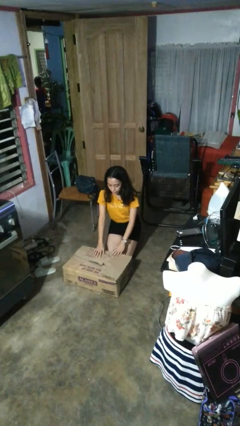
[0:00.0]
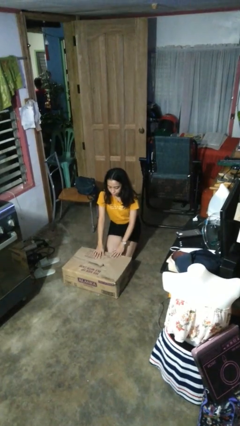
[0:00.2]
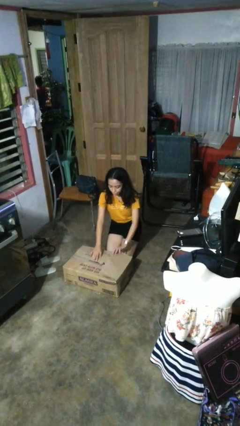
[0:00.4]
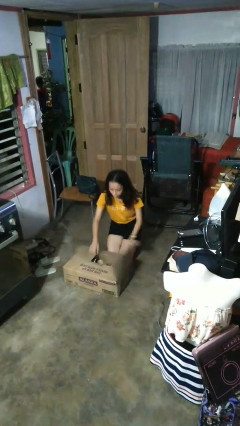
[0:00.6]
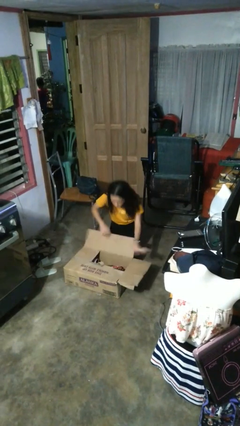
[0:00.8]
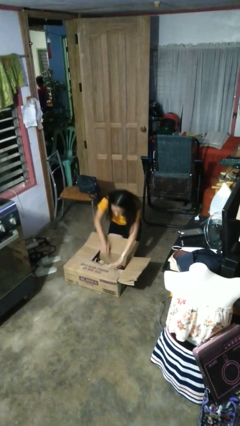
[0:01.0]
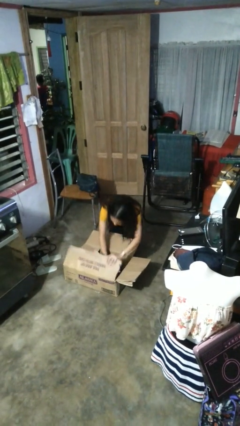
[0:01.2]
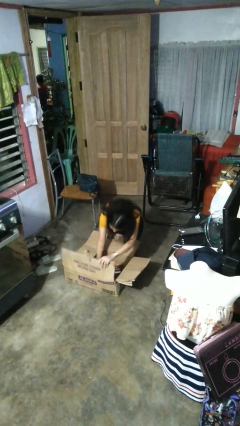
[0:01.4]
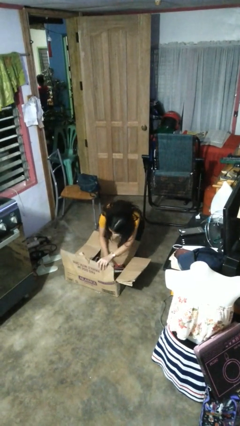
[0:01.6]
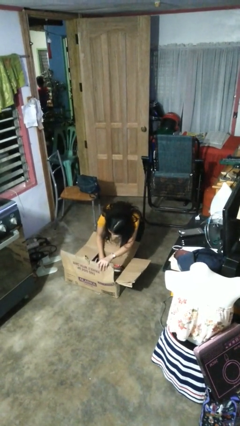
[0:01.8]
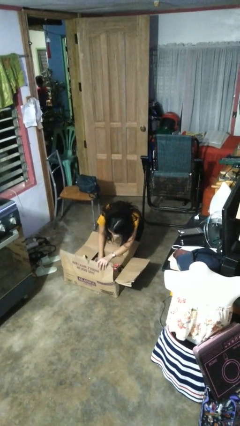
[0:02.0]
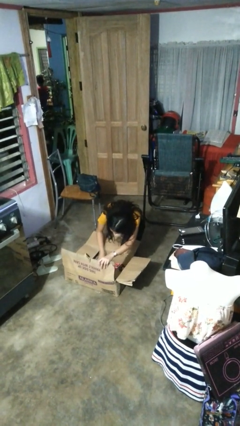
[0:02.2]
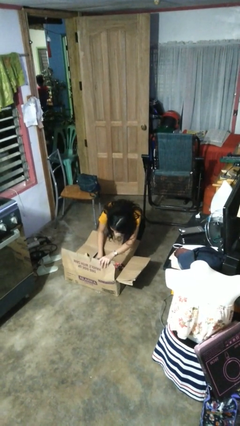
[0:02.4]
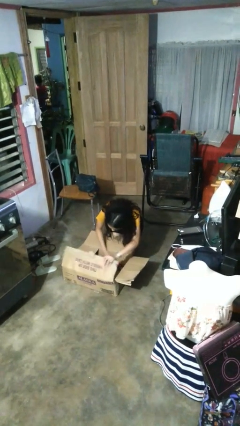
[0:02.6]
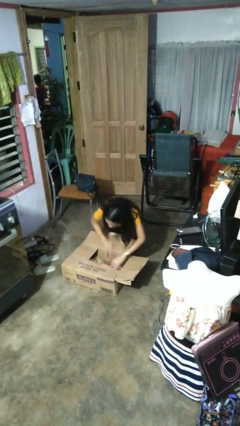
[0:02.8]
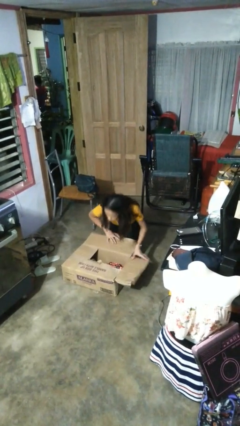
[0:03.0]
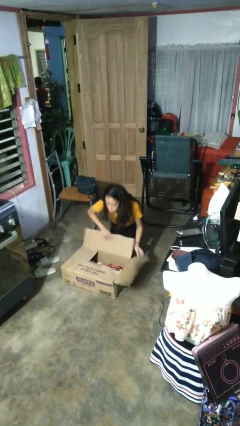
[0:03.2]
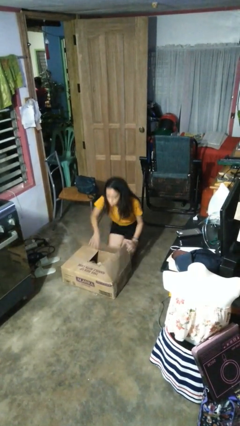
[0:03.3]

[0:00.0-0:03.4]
person searches in box

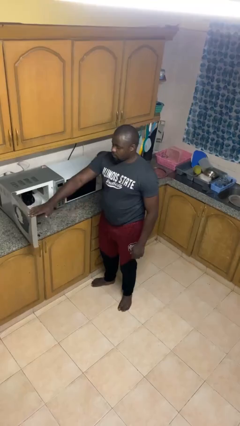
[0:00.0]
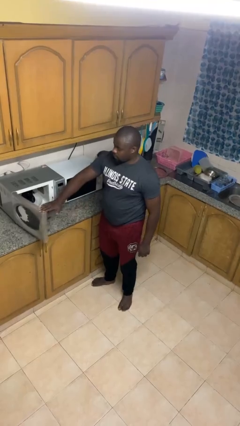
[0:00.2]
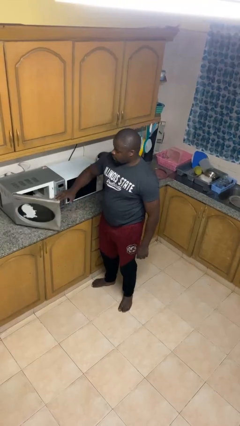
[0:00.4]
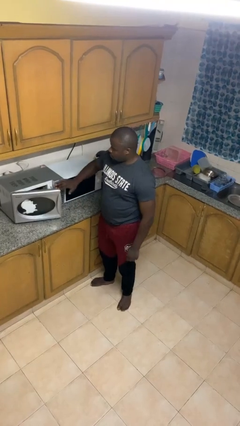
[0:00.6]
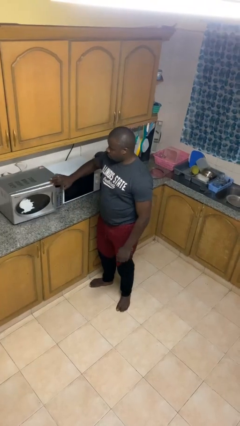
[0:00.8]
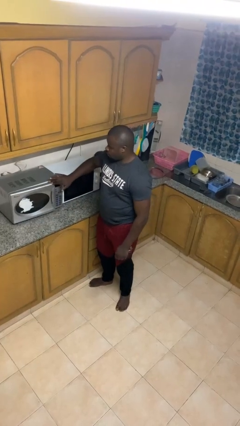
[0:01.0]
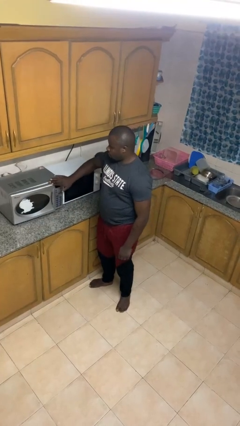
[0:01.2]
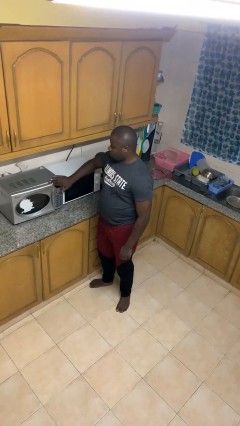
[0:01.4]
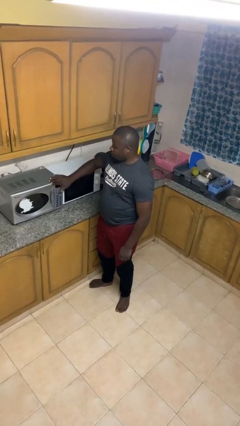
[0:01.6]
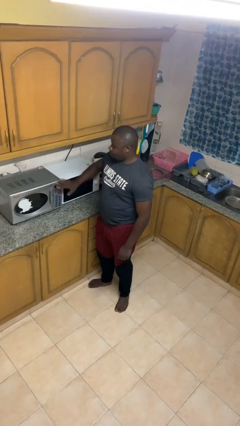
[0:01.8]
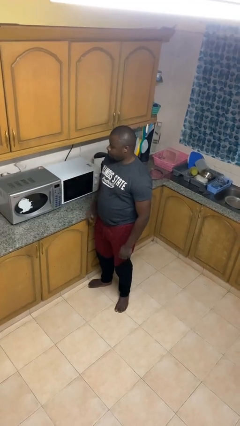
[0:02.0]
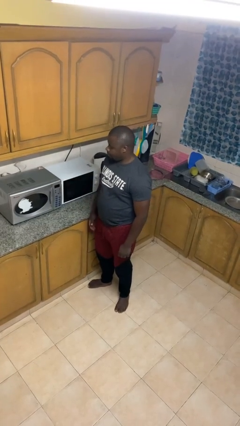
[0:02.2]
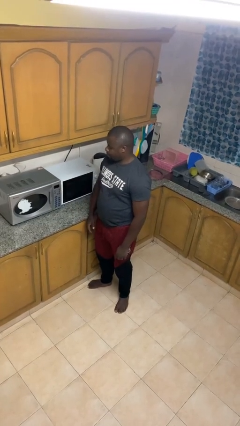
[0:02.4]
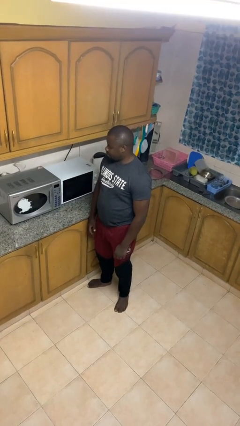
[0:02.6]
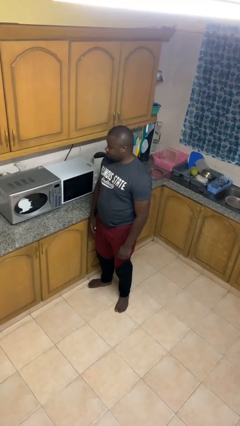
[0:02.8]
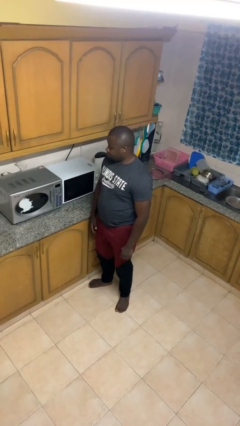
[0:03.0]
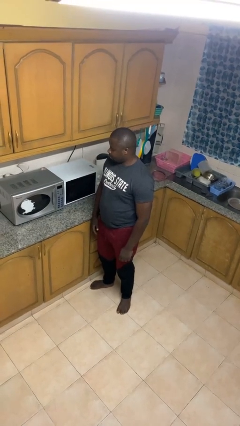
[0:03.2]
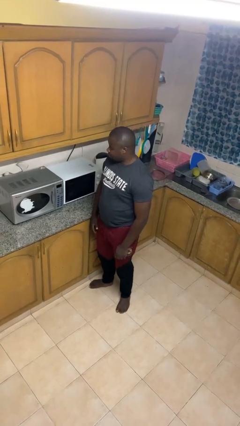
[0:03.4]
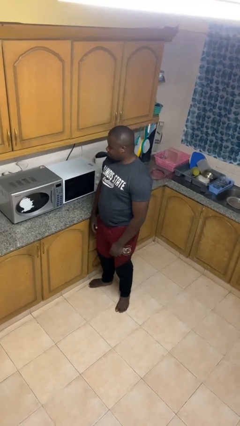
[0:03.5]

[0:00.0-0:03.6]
person closes microwave

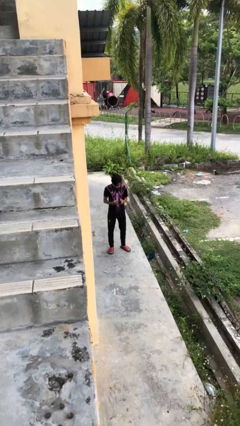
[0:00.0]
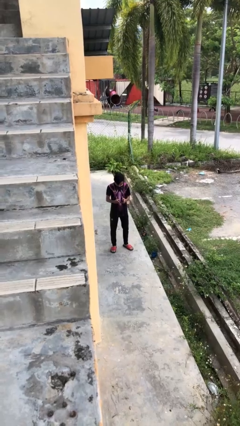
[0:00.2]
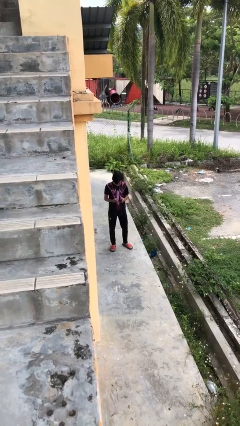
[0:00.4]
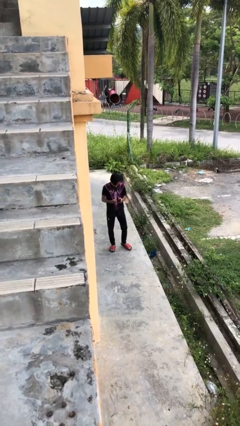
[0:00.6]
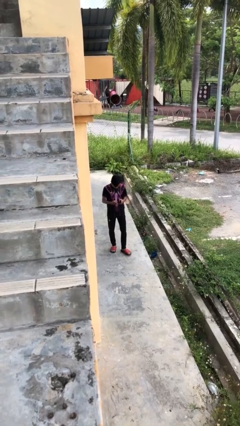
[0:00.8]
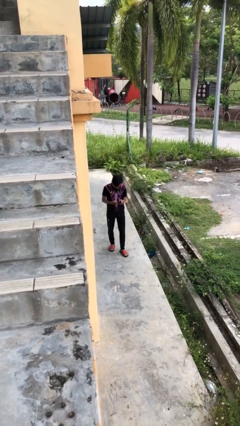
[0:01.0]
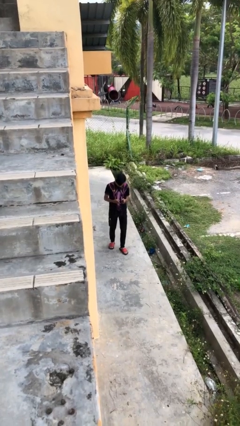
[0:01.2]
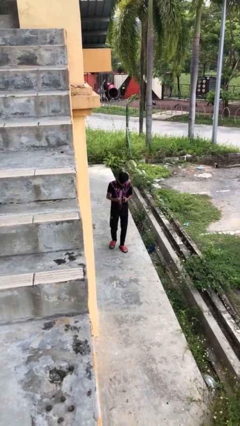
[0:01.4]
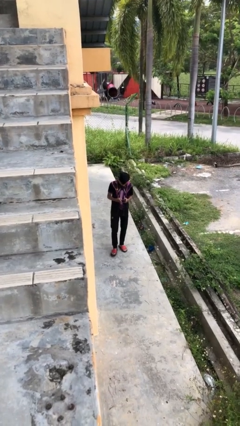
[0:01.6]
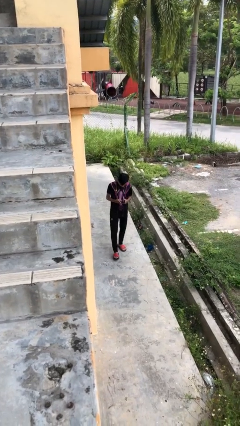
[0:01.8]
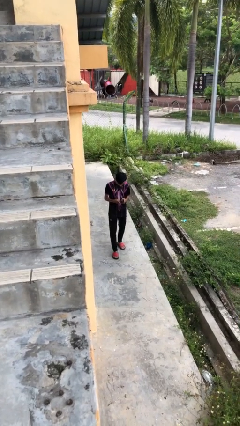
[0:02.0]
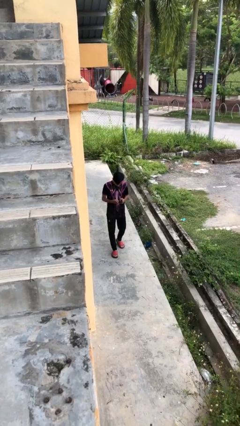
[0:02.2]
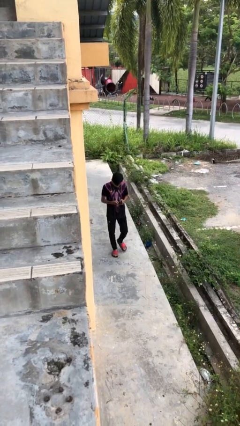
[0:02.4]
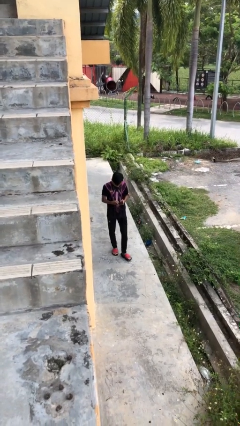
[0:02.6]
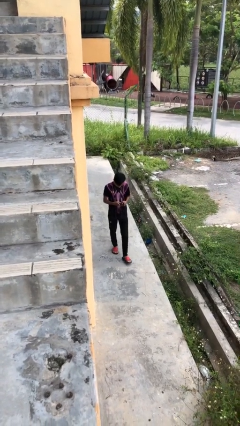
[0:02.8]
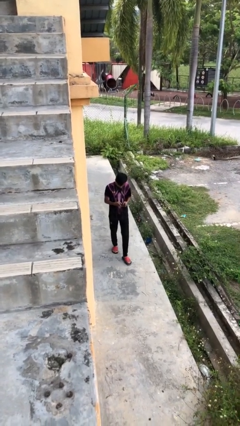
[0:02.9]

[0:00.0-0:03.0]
person texts on phone

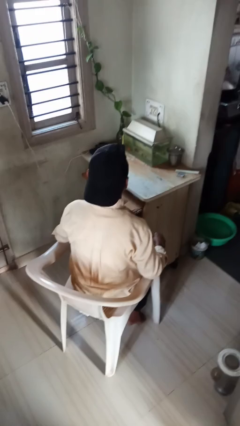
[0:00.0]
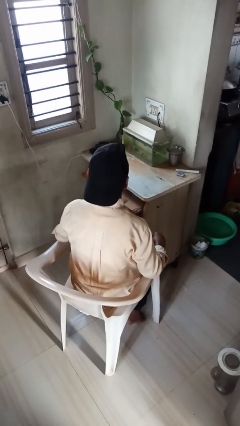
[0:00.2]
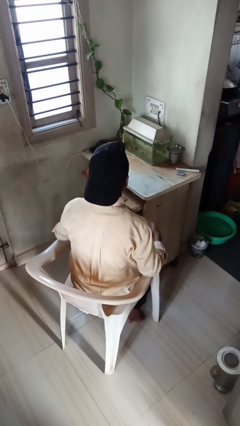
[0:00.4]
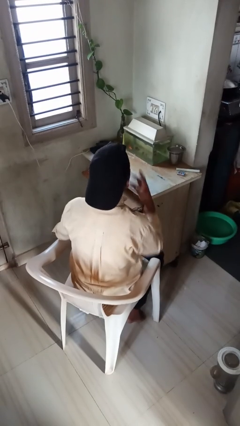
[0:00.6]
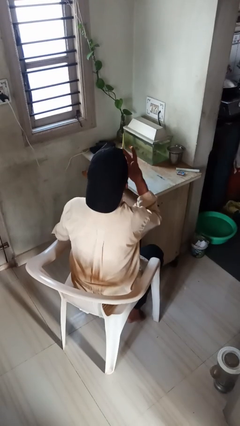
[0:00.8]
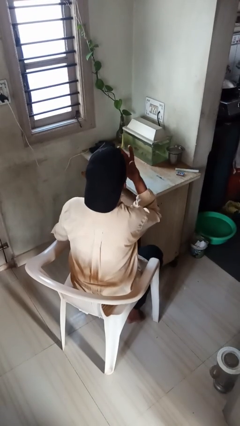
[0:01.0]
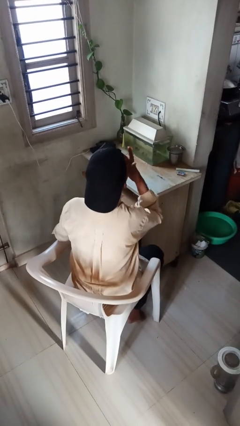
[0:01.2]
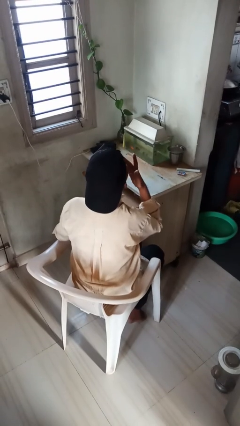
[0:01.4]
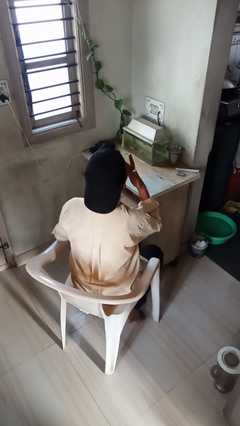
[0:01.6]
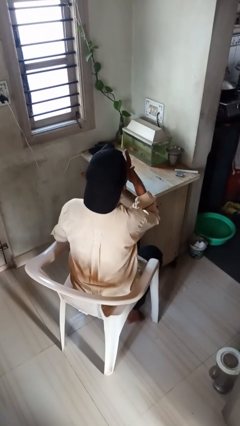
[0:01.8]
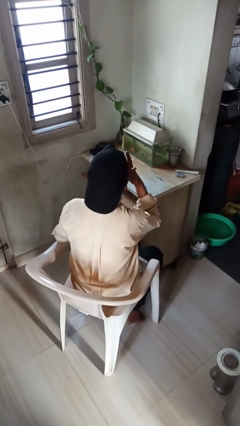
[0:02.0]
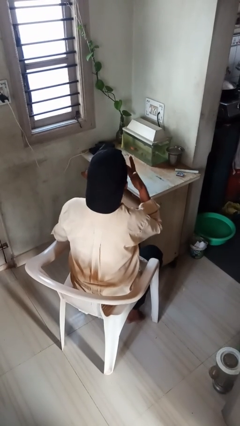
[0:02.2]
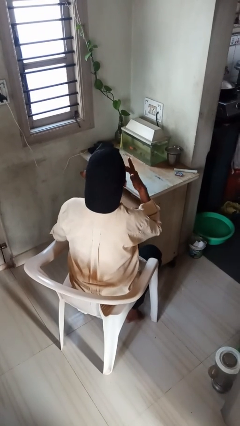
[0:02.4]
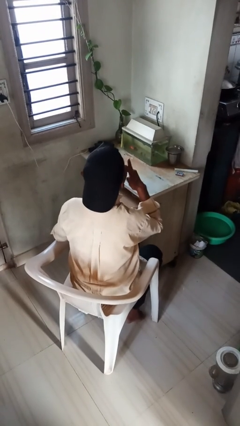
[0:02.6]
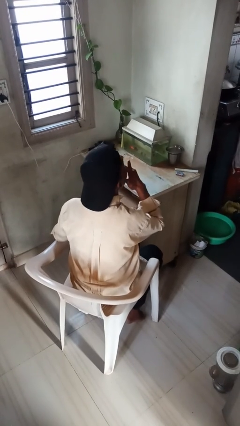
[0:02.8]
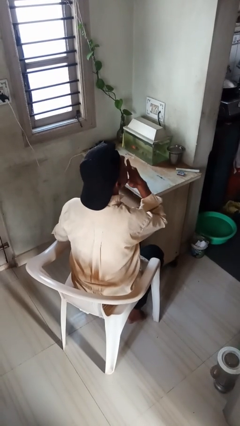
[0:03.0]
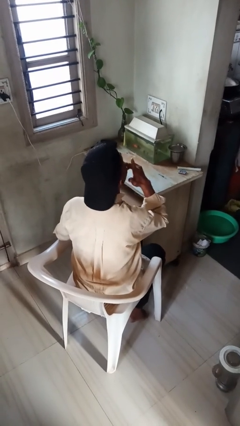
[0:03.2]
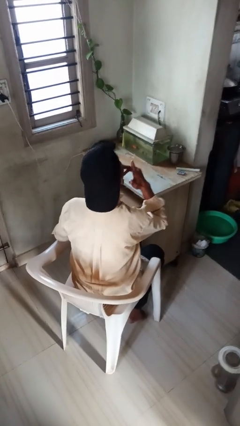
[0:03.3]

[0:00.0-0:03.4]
person licks fingers

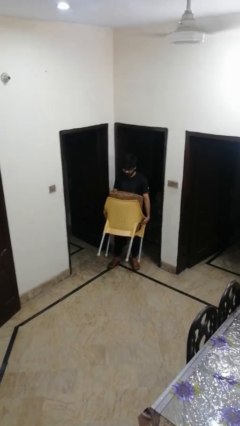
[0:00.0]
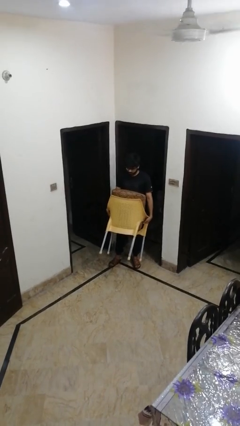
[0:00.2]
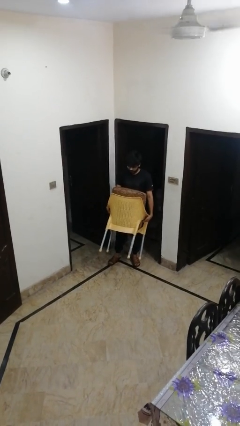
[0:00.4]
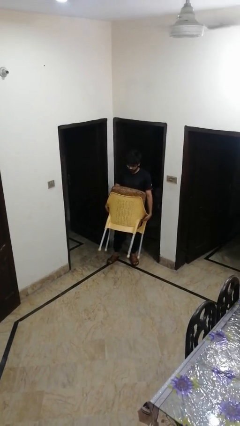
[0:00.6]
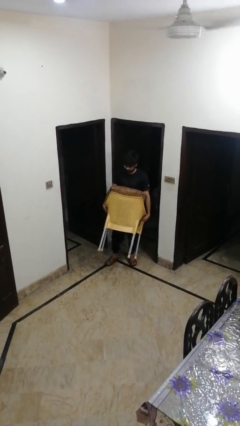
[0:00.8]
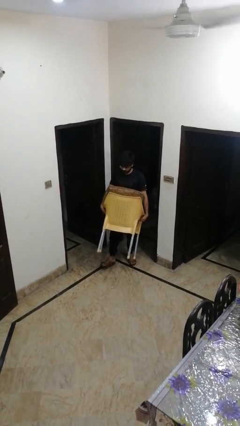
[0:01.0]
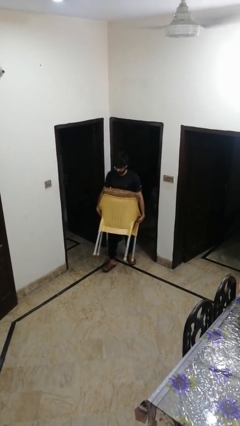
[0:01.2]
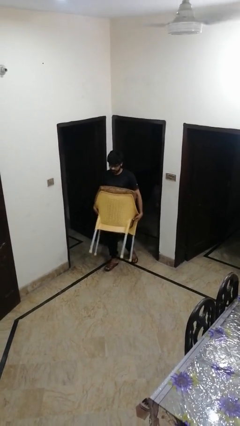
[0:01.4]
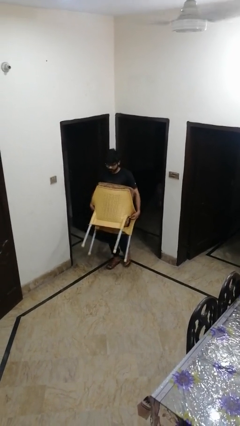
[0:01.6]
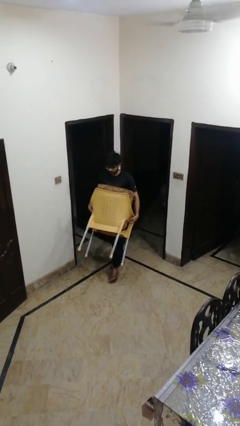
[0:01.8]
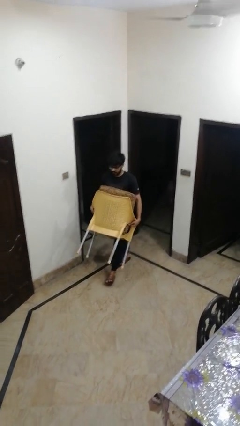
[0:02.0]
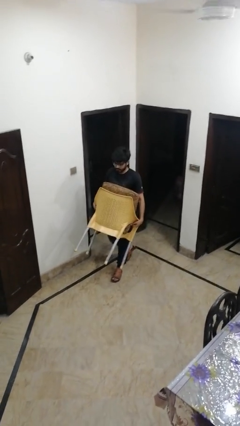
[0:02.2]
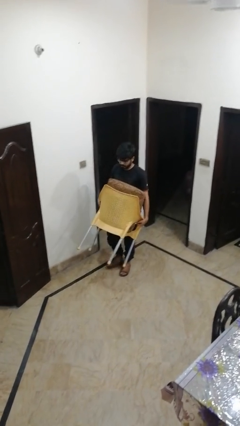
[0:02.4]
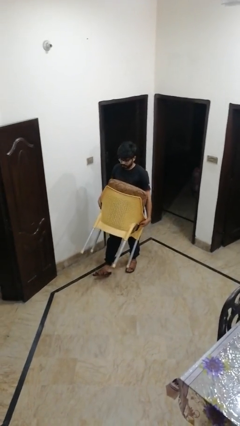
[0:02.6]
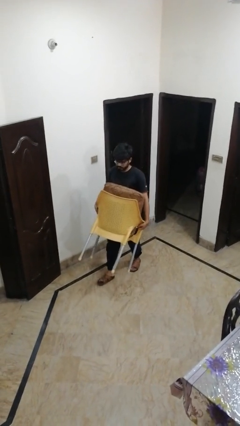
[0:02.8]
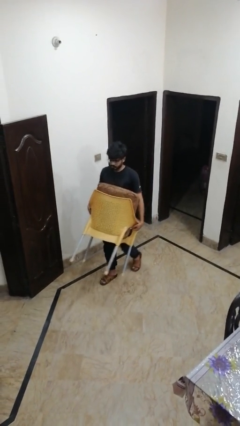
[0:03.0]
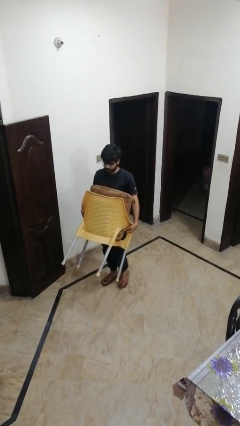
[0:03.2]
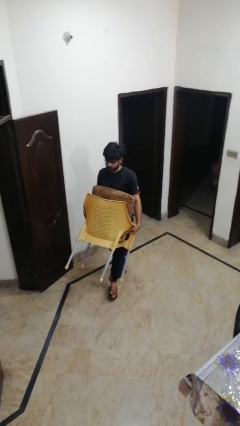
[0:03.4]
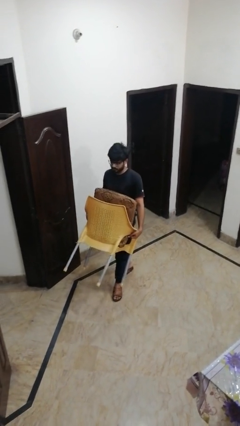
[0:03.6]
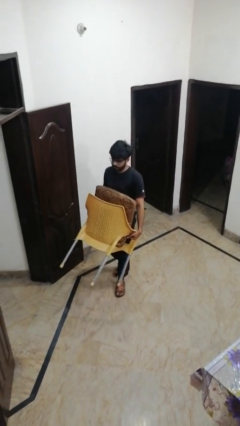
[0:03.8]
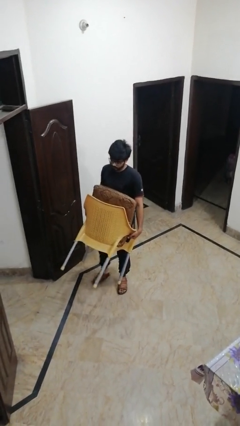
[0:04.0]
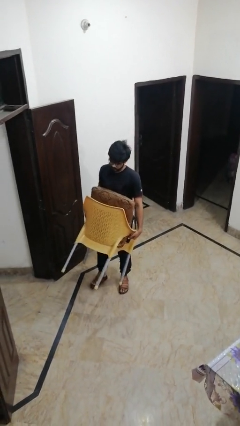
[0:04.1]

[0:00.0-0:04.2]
person carries furniture
